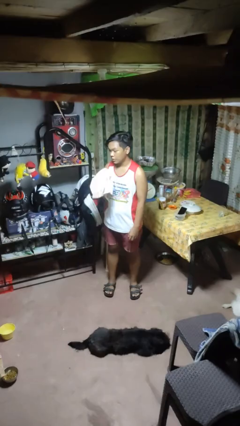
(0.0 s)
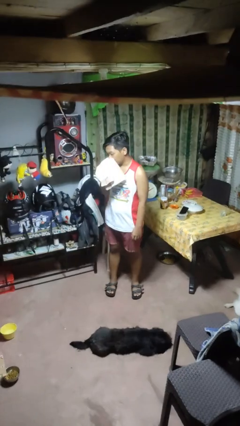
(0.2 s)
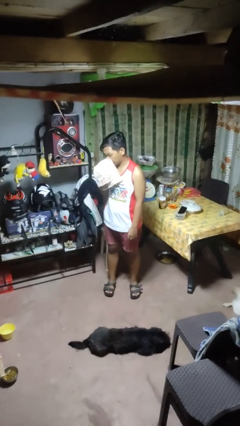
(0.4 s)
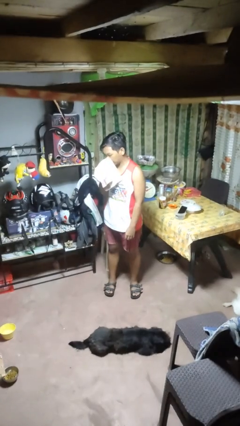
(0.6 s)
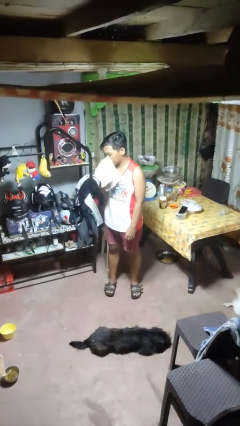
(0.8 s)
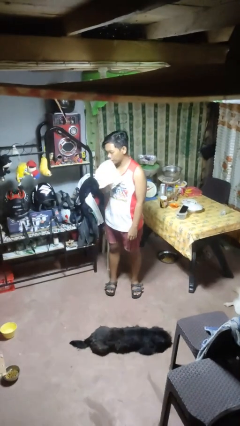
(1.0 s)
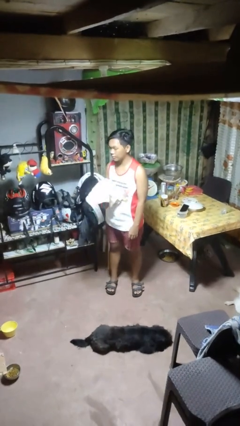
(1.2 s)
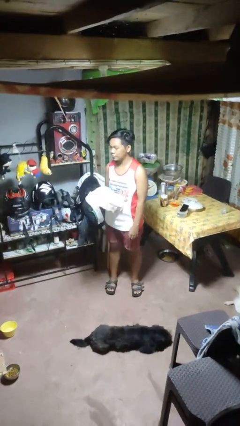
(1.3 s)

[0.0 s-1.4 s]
person blows nose

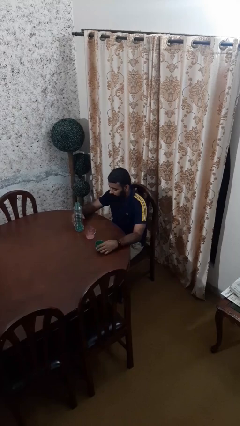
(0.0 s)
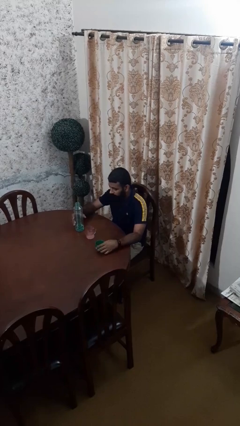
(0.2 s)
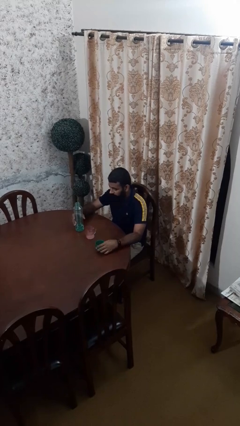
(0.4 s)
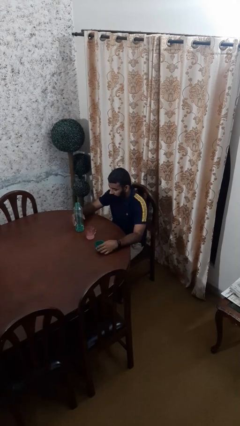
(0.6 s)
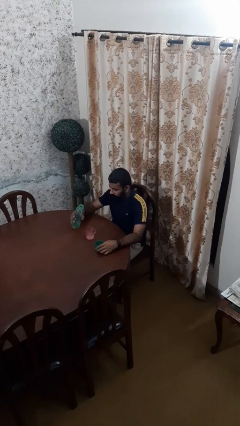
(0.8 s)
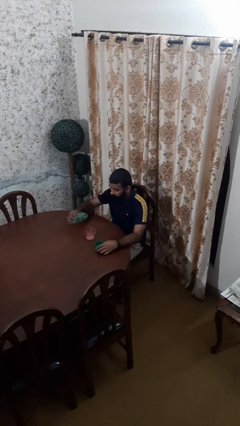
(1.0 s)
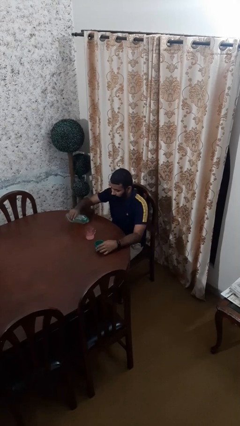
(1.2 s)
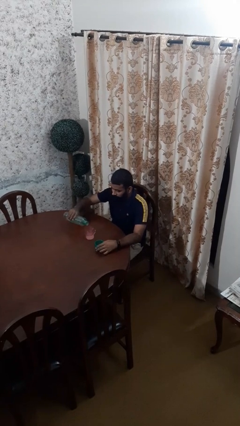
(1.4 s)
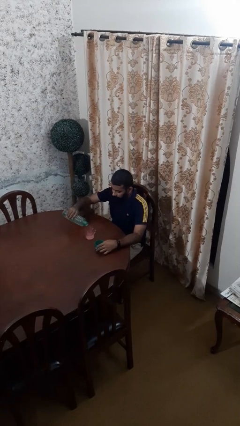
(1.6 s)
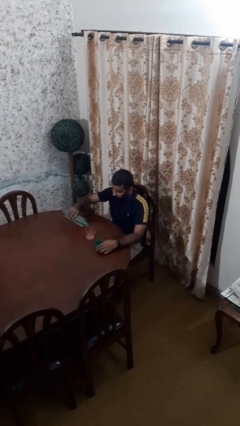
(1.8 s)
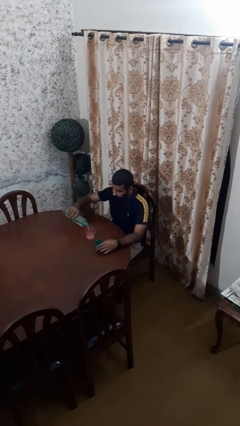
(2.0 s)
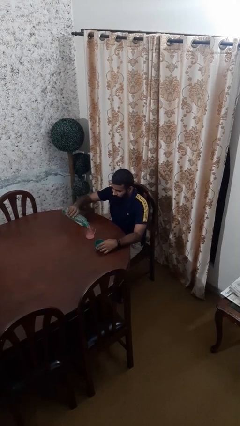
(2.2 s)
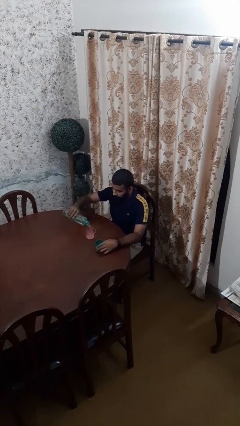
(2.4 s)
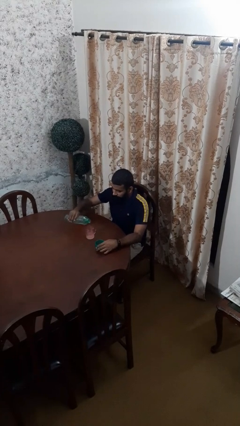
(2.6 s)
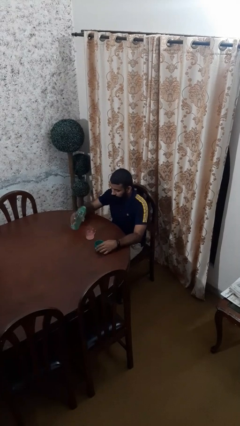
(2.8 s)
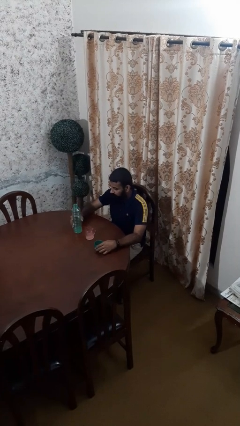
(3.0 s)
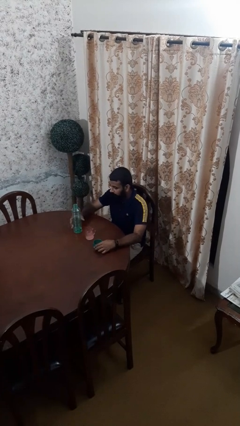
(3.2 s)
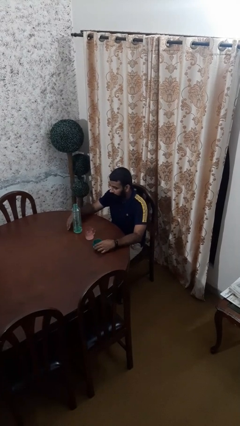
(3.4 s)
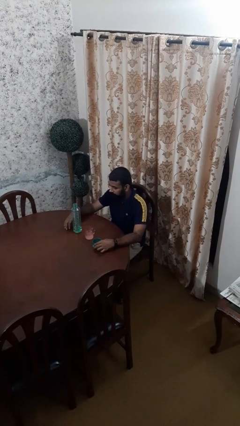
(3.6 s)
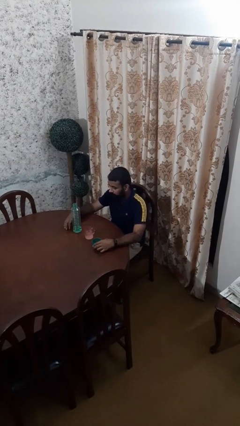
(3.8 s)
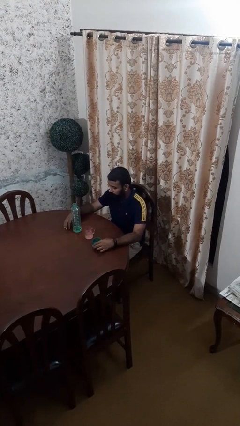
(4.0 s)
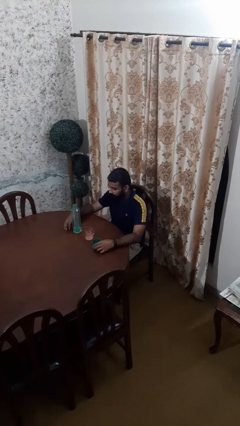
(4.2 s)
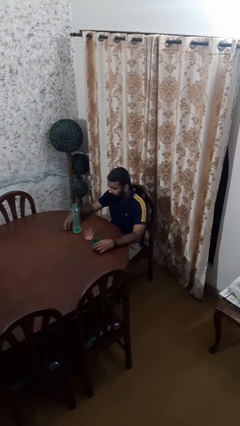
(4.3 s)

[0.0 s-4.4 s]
person pours liquid into cup

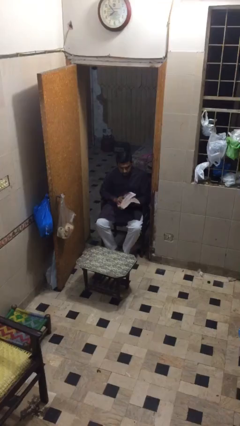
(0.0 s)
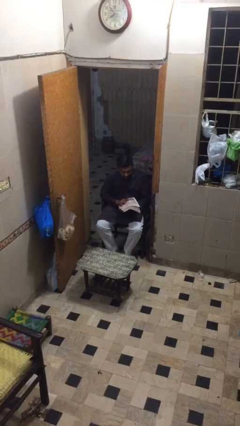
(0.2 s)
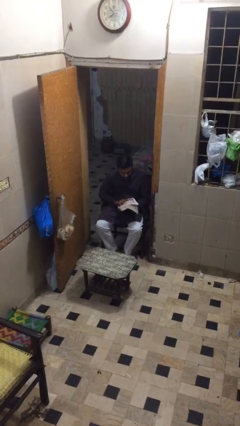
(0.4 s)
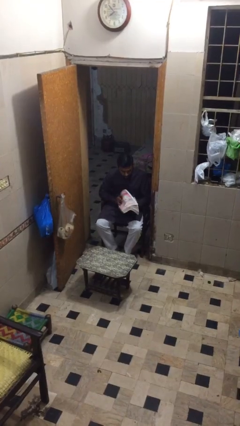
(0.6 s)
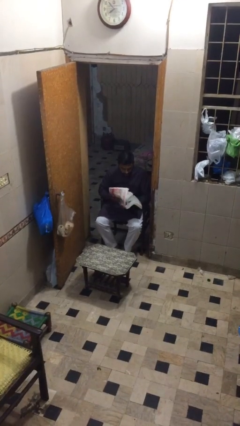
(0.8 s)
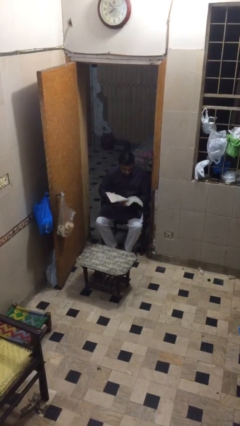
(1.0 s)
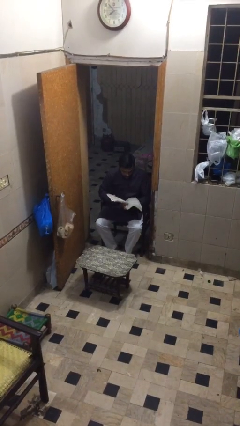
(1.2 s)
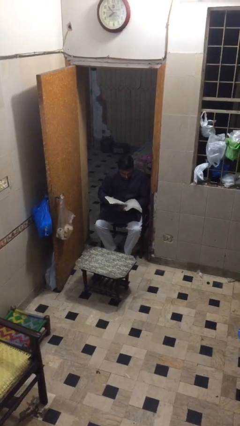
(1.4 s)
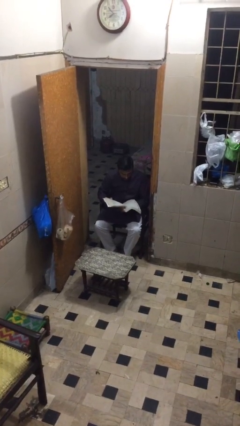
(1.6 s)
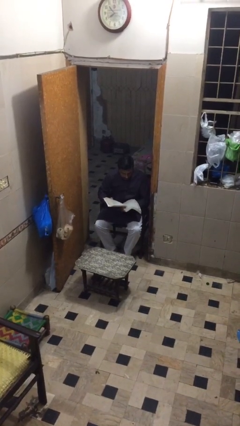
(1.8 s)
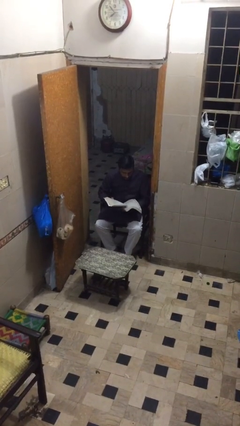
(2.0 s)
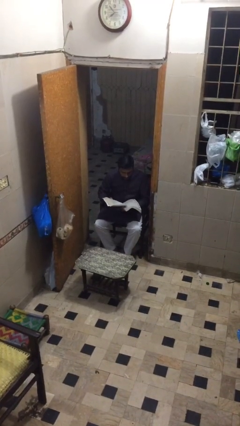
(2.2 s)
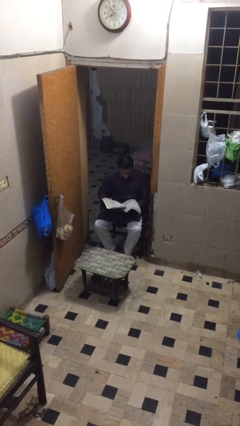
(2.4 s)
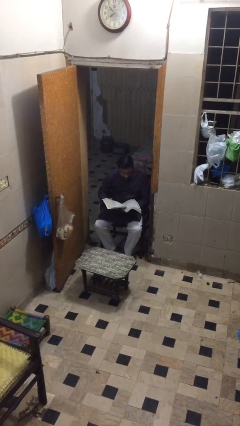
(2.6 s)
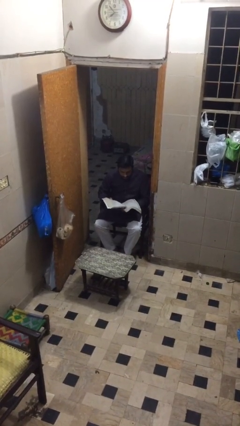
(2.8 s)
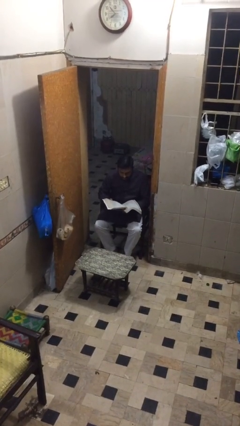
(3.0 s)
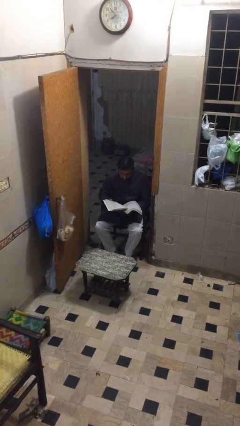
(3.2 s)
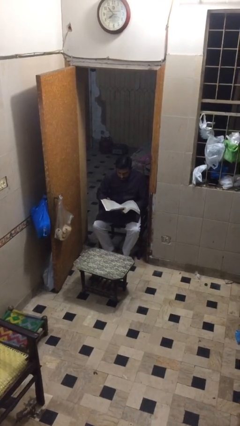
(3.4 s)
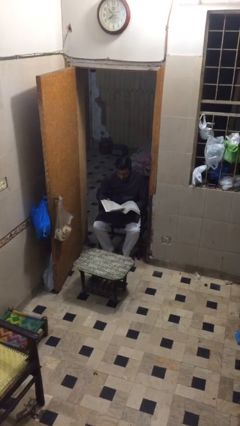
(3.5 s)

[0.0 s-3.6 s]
person reads document

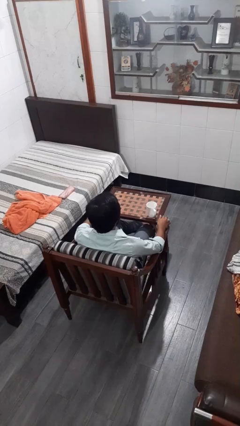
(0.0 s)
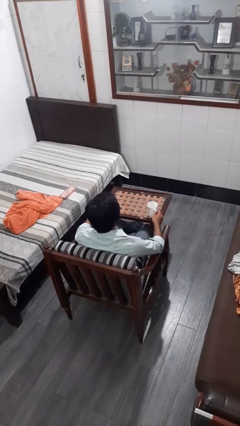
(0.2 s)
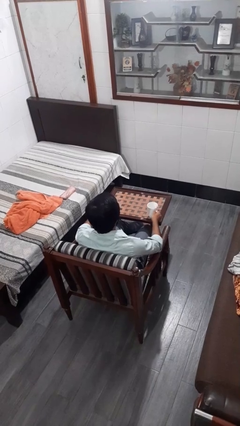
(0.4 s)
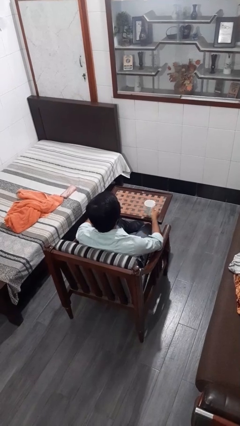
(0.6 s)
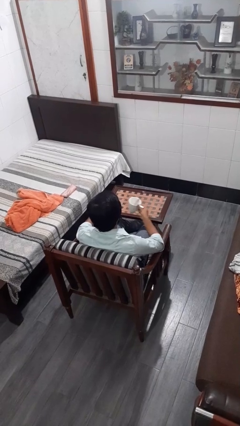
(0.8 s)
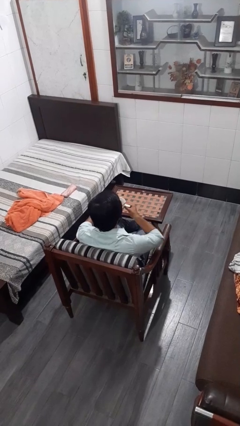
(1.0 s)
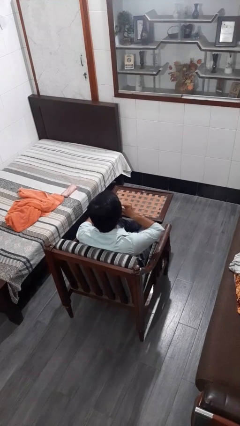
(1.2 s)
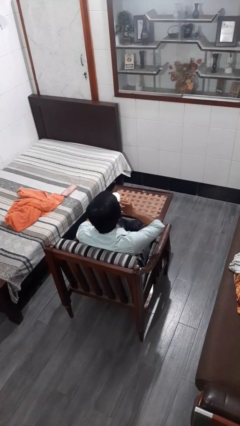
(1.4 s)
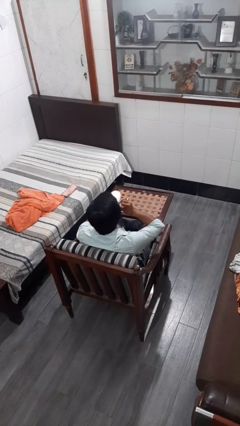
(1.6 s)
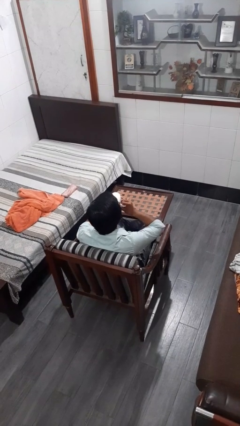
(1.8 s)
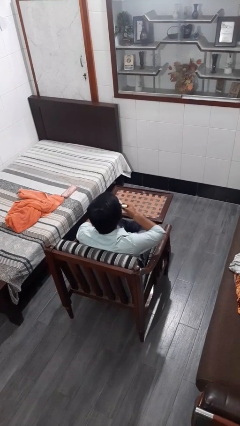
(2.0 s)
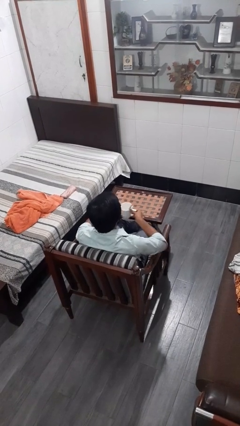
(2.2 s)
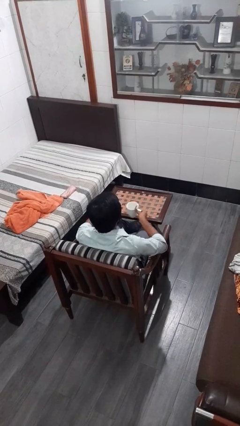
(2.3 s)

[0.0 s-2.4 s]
person drinks from mug

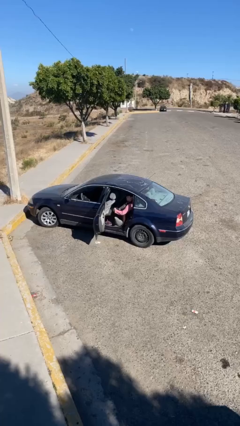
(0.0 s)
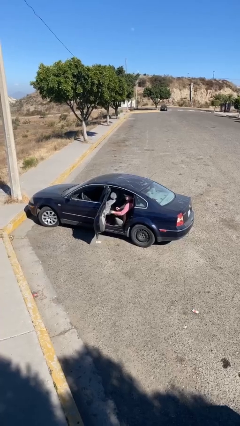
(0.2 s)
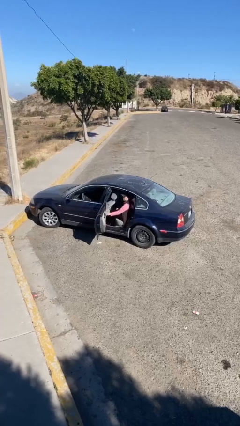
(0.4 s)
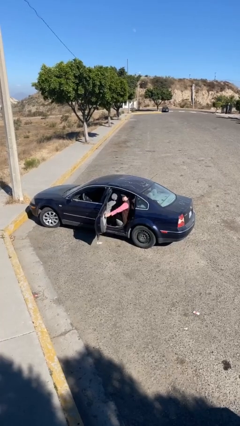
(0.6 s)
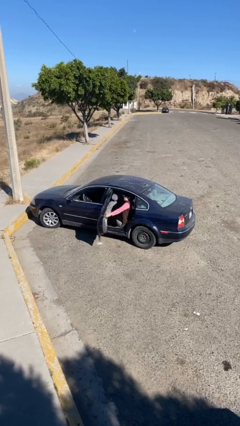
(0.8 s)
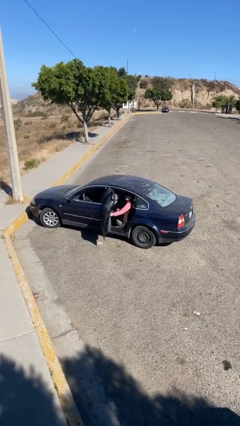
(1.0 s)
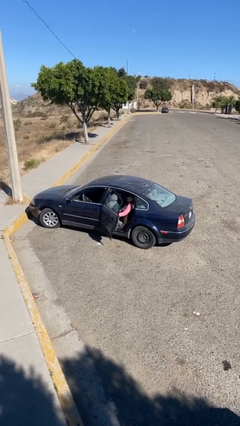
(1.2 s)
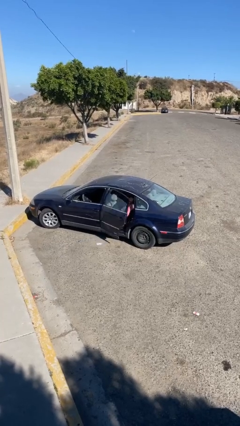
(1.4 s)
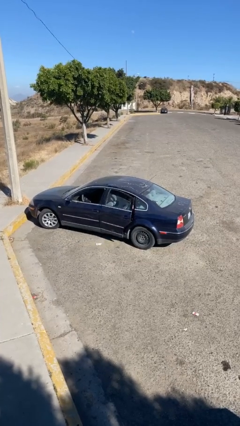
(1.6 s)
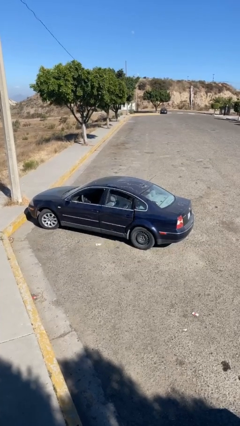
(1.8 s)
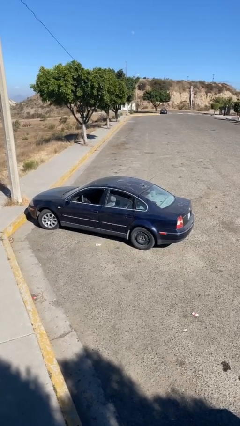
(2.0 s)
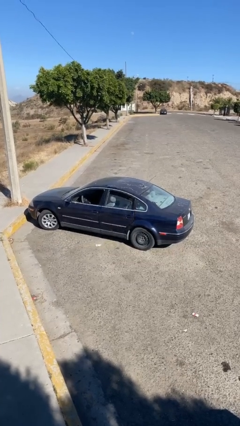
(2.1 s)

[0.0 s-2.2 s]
person closes car door

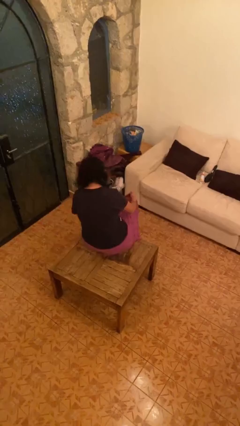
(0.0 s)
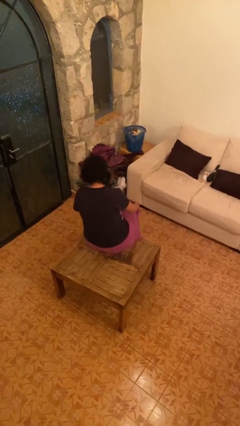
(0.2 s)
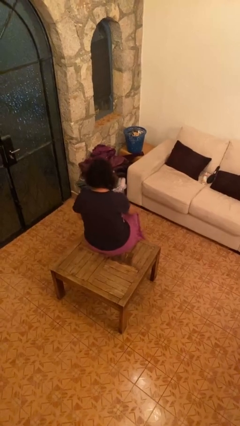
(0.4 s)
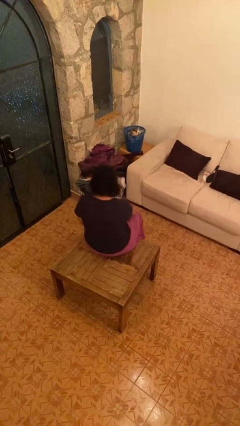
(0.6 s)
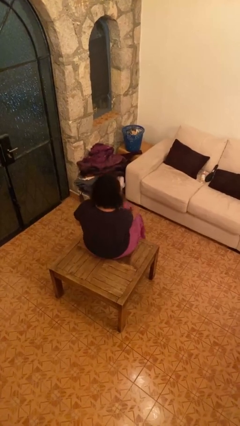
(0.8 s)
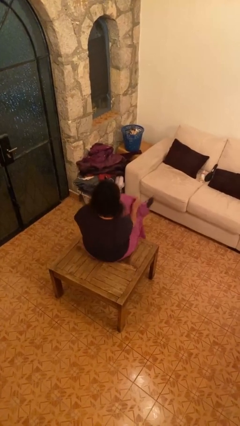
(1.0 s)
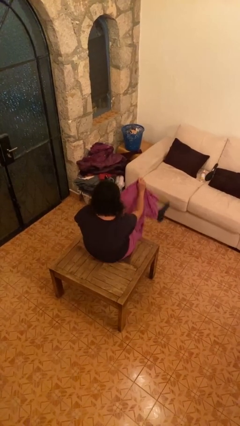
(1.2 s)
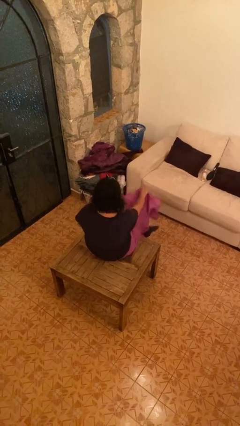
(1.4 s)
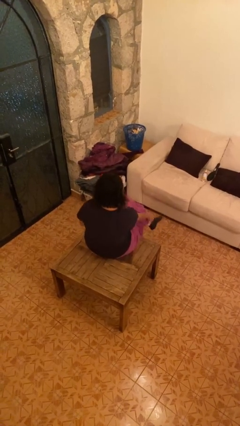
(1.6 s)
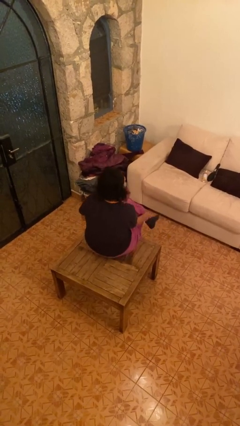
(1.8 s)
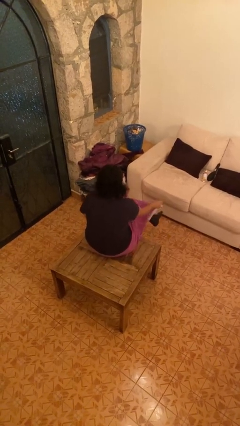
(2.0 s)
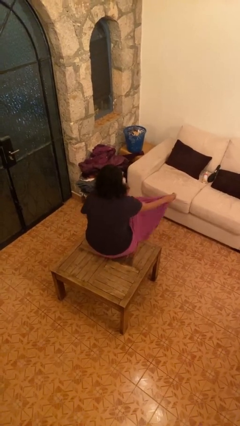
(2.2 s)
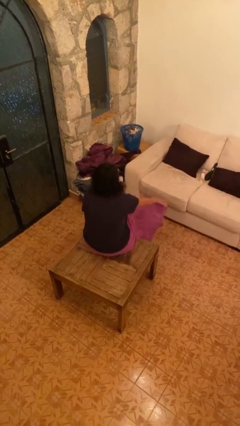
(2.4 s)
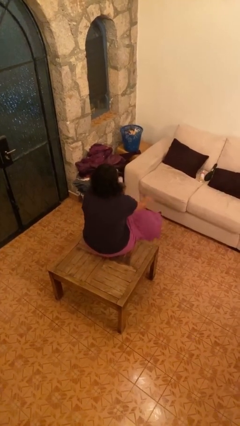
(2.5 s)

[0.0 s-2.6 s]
person crosses legs

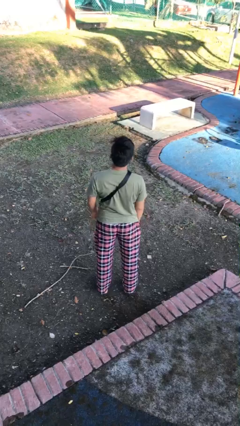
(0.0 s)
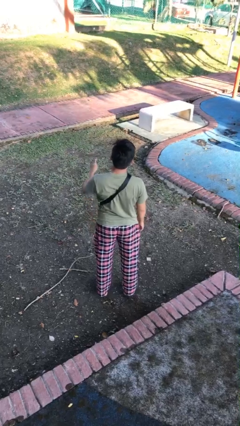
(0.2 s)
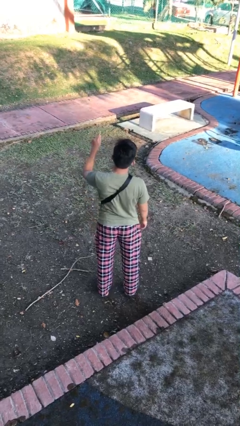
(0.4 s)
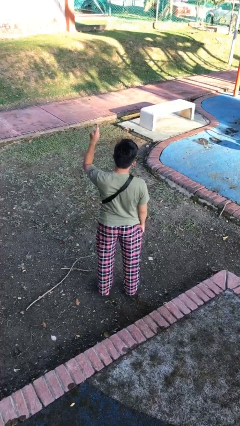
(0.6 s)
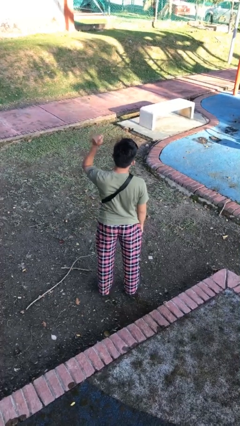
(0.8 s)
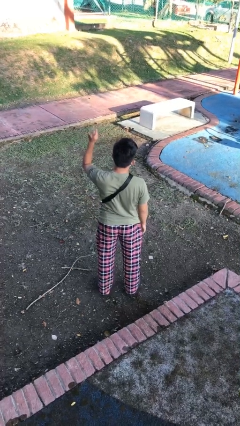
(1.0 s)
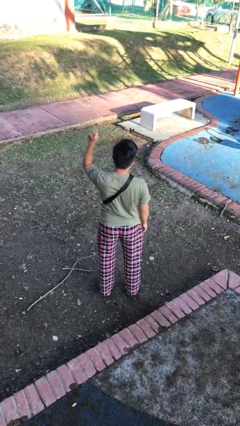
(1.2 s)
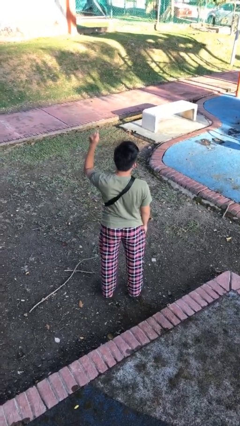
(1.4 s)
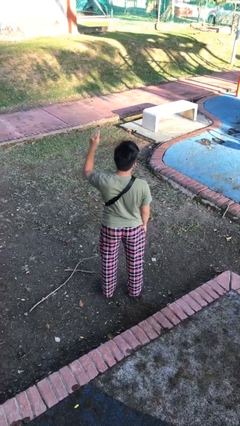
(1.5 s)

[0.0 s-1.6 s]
person gestures number one
